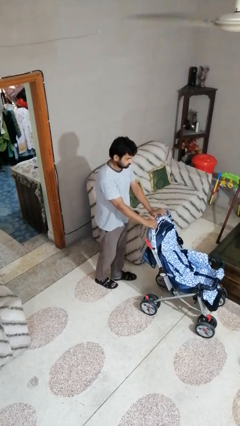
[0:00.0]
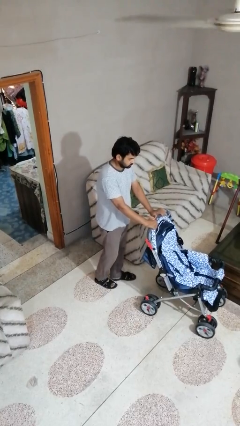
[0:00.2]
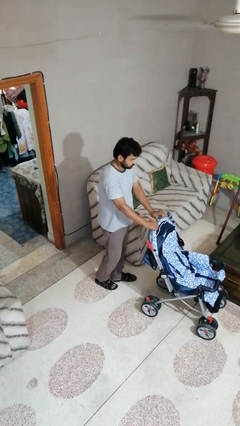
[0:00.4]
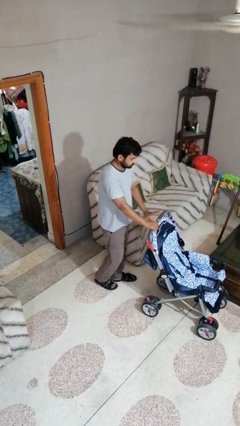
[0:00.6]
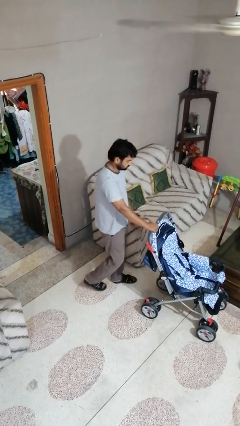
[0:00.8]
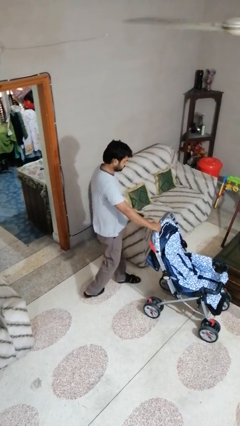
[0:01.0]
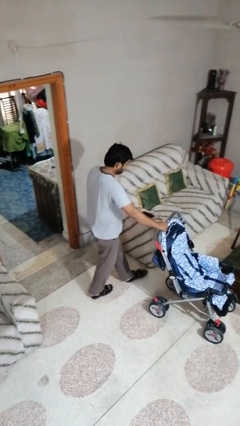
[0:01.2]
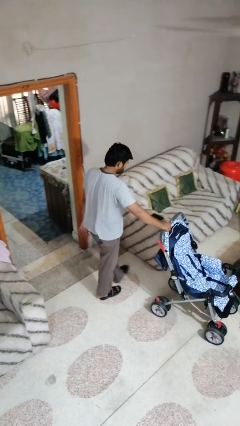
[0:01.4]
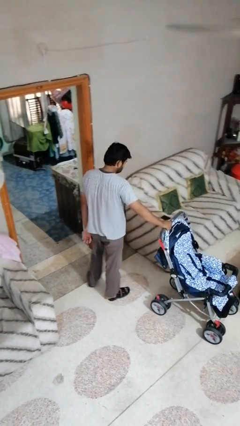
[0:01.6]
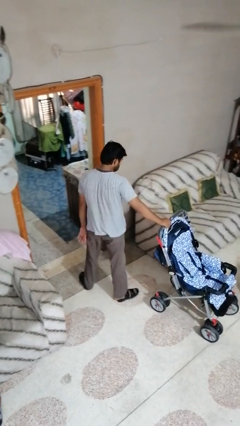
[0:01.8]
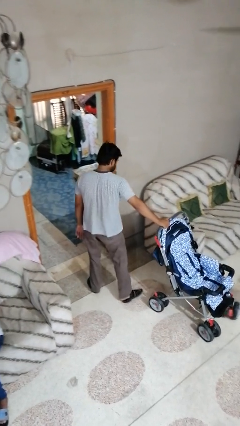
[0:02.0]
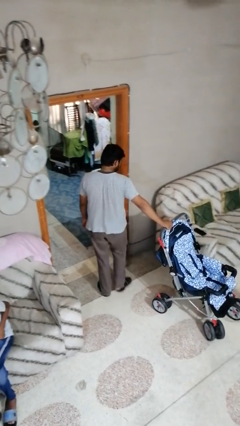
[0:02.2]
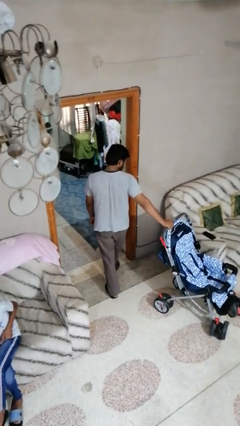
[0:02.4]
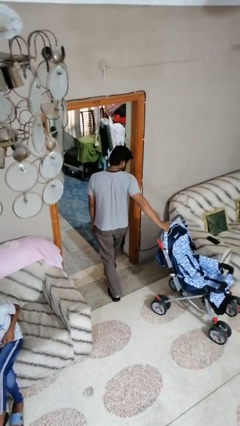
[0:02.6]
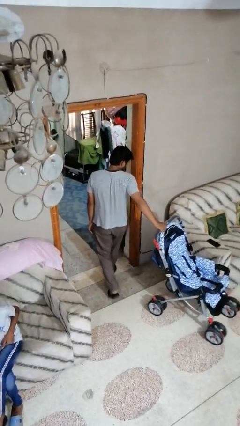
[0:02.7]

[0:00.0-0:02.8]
person pulls wheeled cart

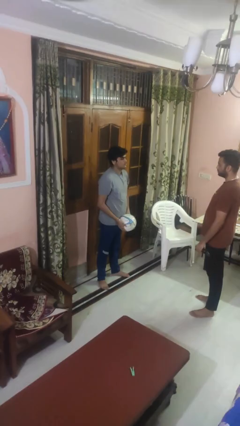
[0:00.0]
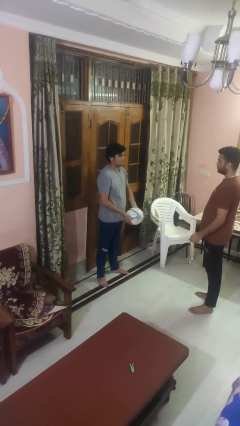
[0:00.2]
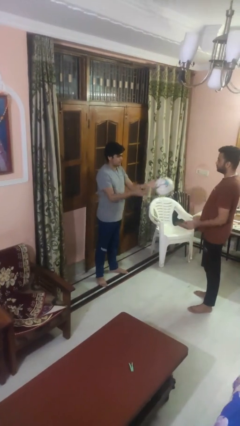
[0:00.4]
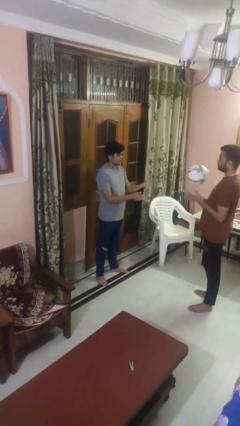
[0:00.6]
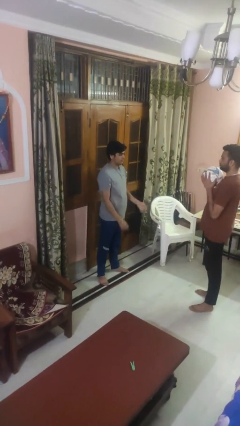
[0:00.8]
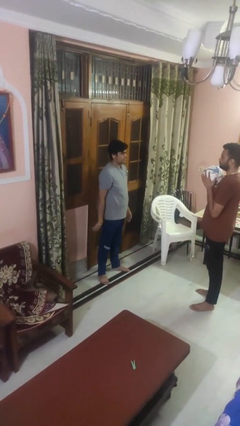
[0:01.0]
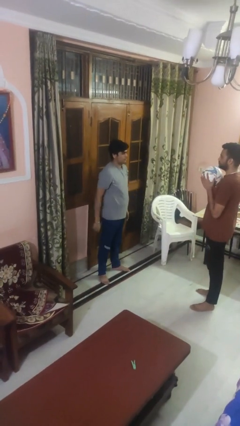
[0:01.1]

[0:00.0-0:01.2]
person throws object to person

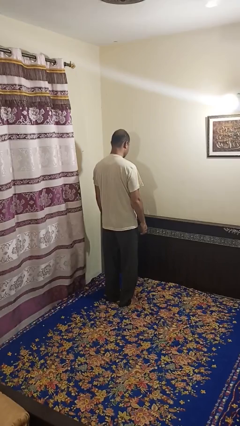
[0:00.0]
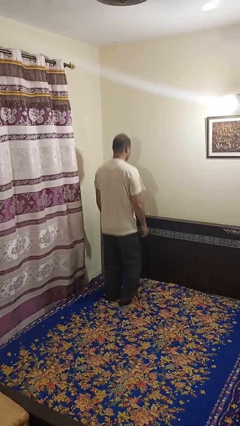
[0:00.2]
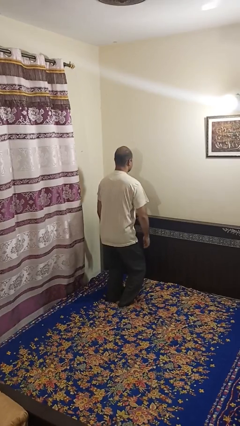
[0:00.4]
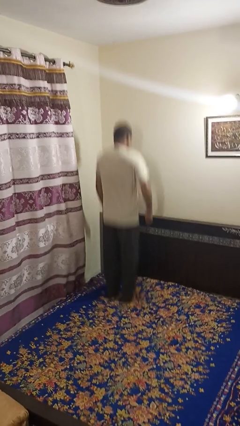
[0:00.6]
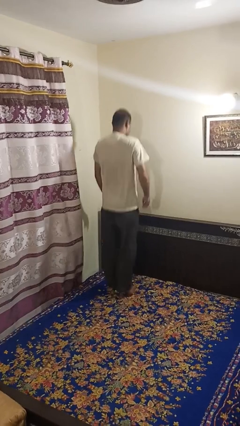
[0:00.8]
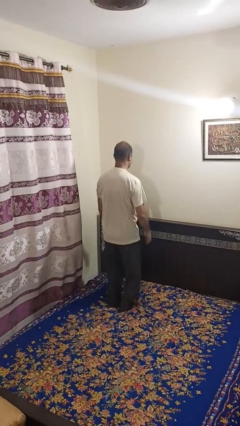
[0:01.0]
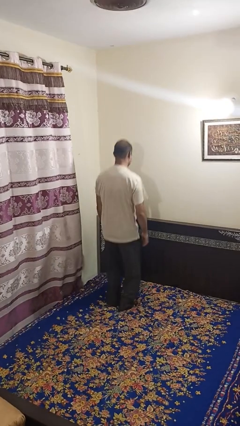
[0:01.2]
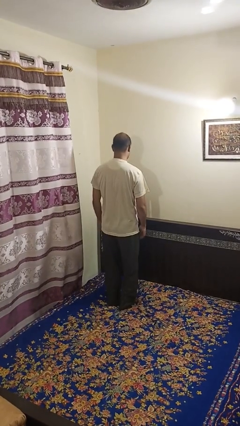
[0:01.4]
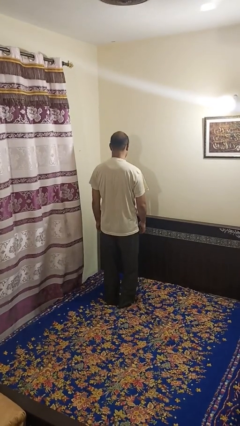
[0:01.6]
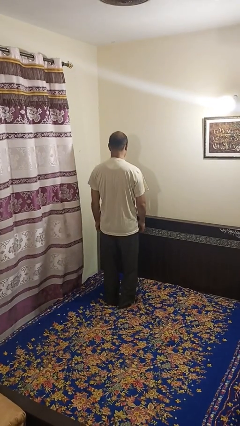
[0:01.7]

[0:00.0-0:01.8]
person jumps on bed

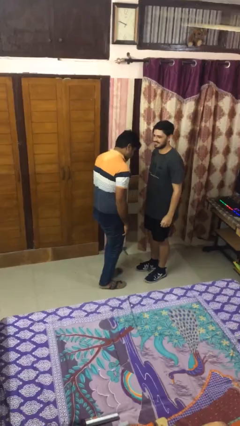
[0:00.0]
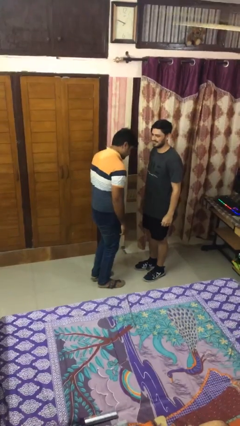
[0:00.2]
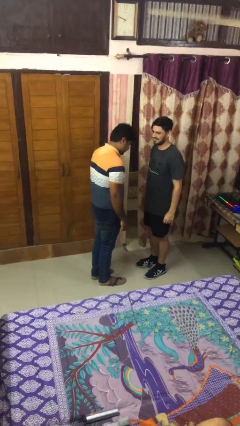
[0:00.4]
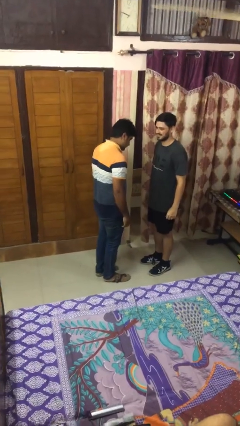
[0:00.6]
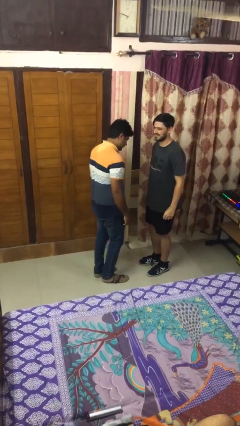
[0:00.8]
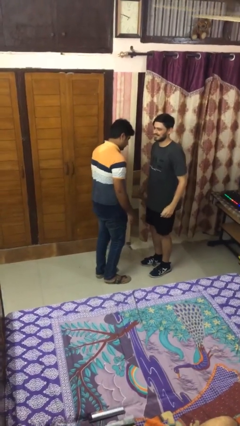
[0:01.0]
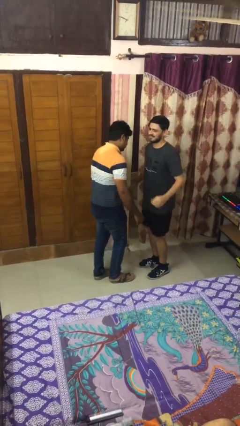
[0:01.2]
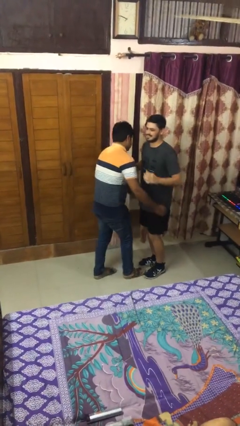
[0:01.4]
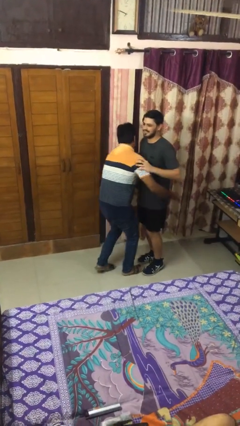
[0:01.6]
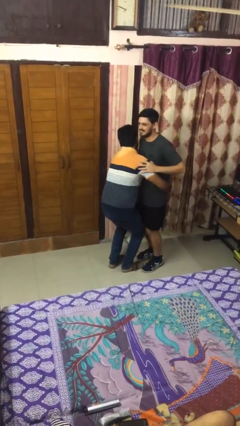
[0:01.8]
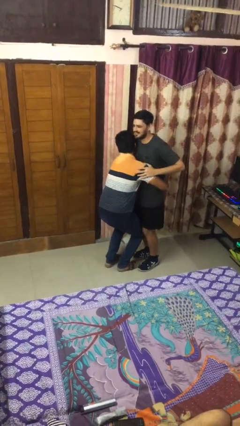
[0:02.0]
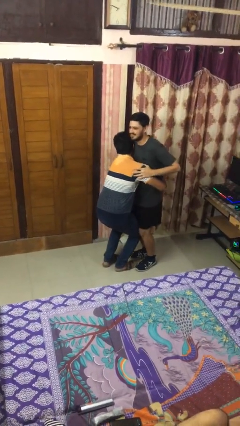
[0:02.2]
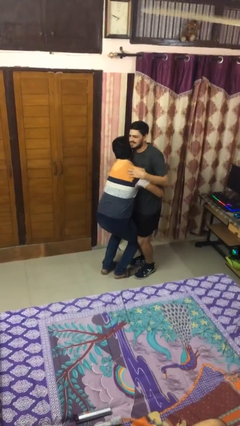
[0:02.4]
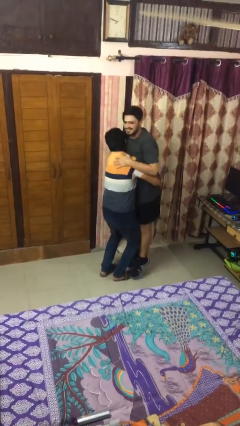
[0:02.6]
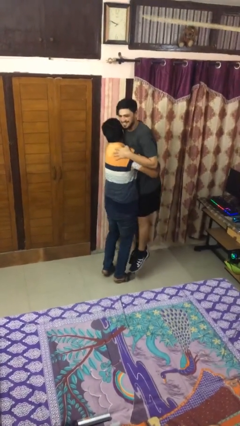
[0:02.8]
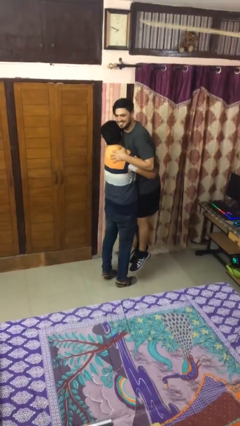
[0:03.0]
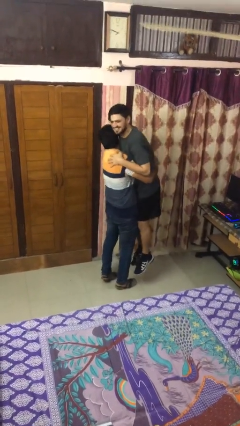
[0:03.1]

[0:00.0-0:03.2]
person picks up person

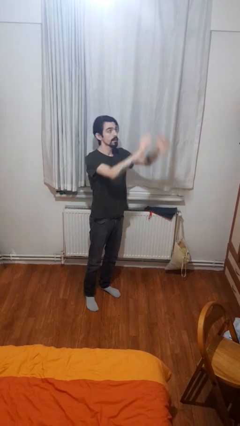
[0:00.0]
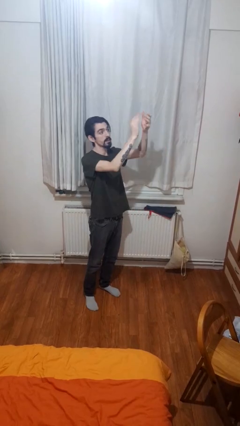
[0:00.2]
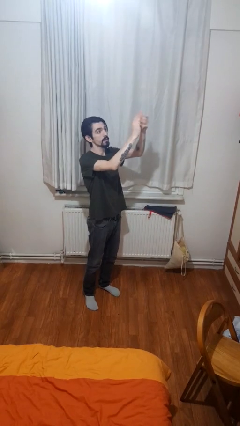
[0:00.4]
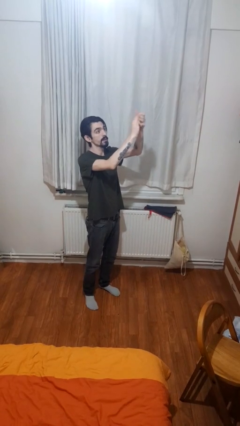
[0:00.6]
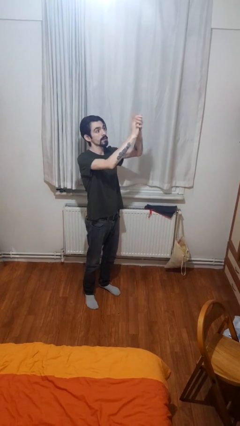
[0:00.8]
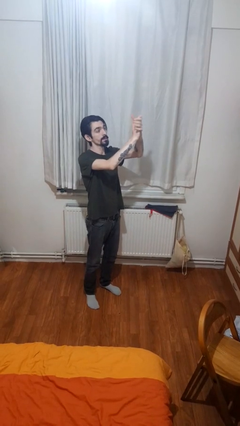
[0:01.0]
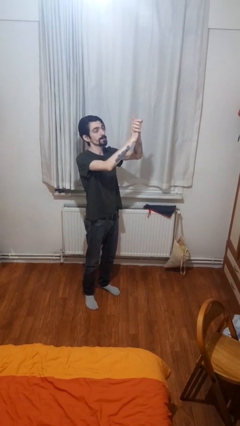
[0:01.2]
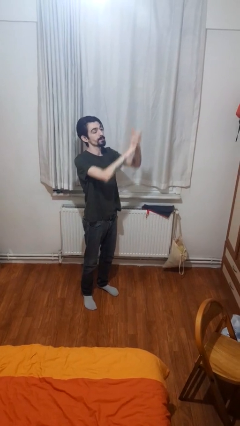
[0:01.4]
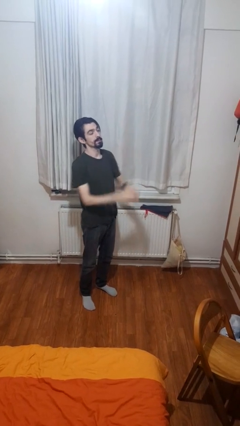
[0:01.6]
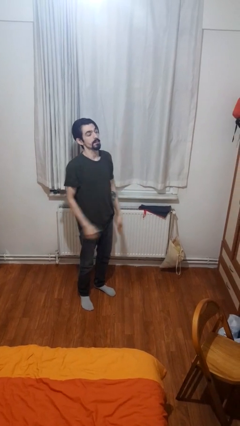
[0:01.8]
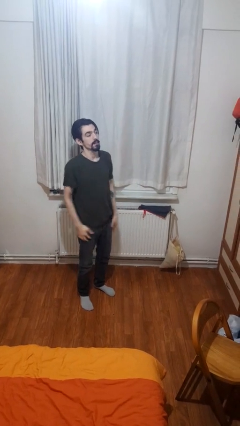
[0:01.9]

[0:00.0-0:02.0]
person claps hands

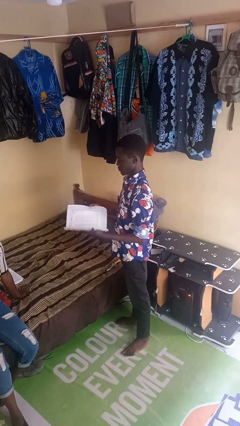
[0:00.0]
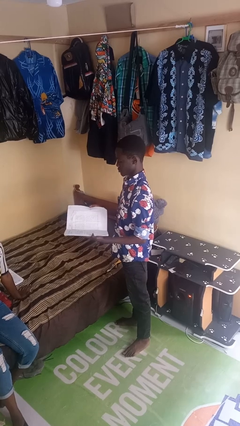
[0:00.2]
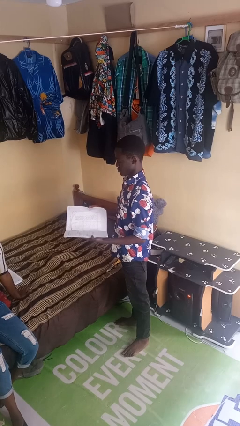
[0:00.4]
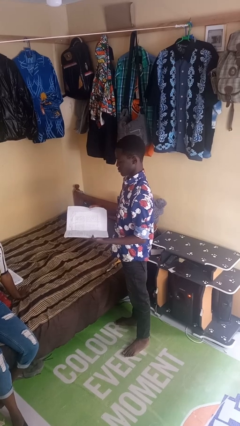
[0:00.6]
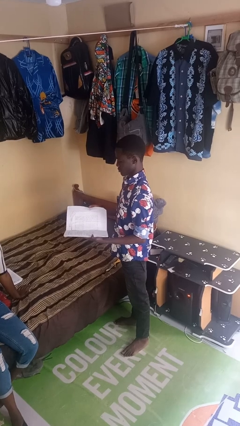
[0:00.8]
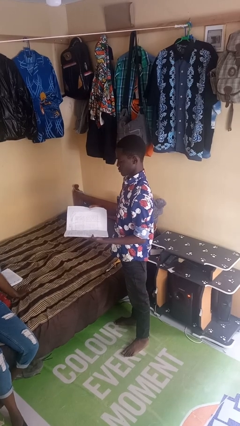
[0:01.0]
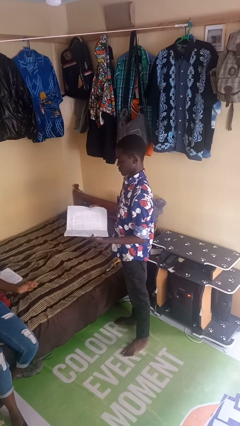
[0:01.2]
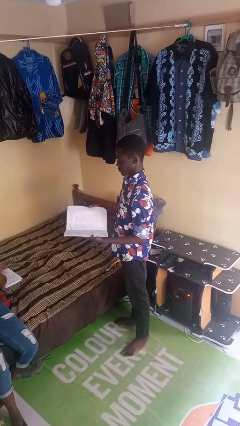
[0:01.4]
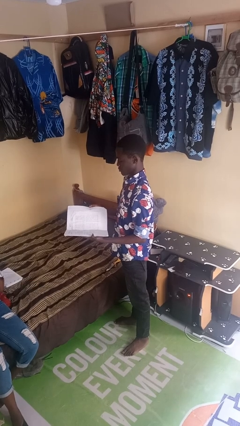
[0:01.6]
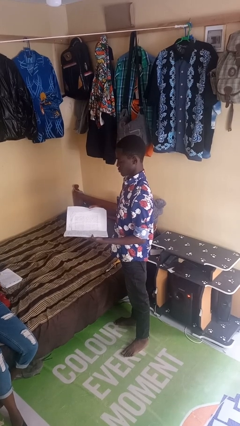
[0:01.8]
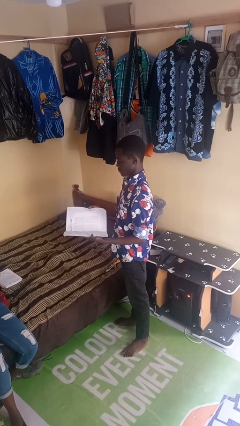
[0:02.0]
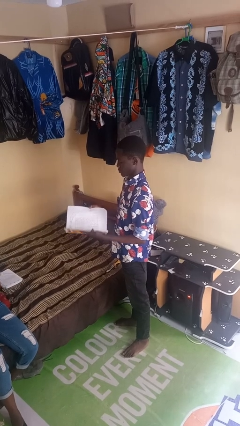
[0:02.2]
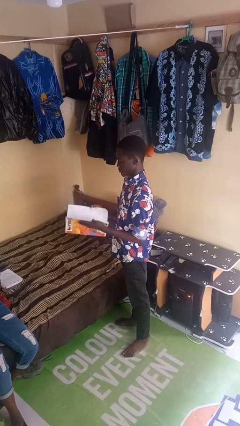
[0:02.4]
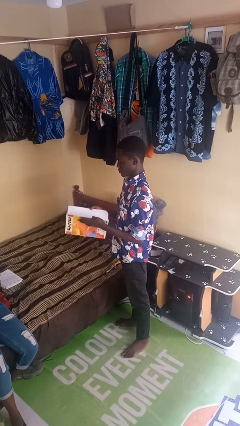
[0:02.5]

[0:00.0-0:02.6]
person reads book

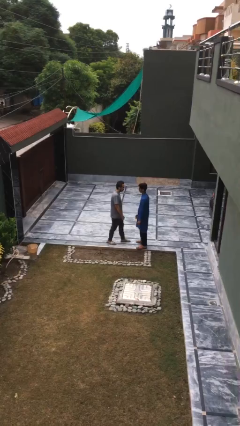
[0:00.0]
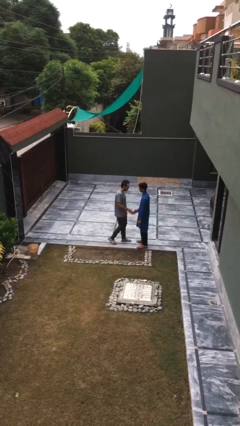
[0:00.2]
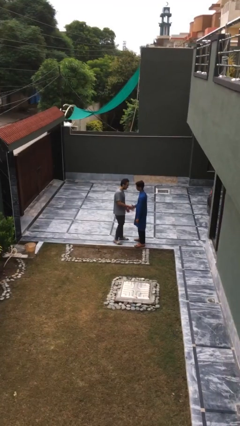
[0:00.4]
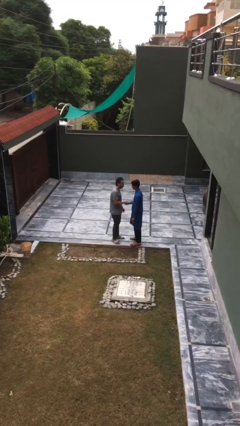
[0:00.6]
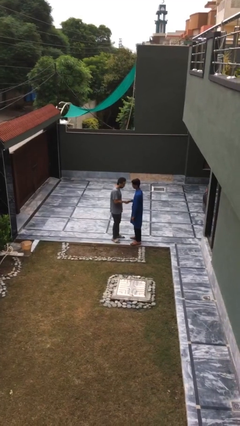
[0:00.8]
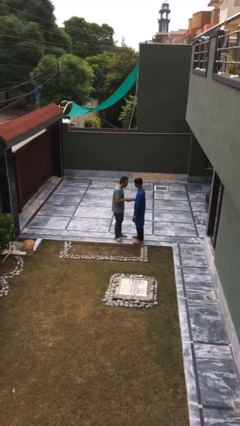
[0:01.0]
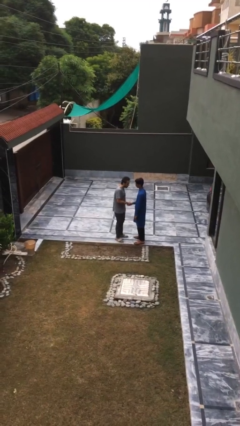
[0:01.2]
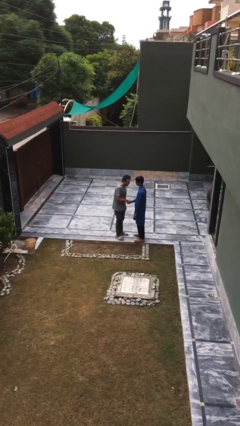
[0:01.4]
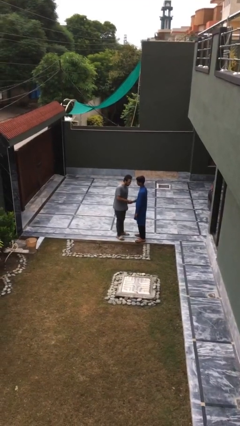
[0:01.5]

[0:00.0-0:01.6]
person shakes hand

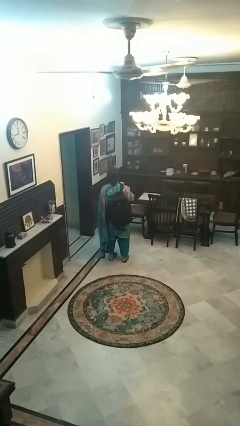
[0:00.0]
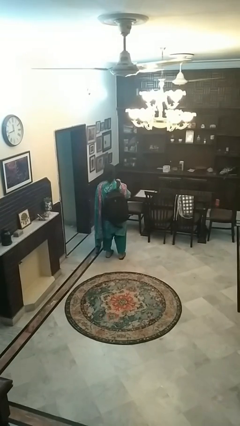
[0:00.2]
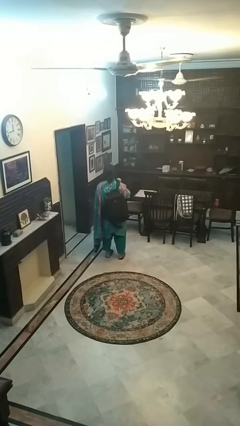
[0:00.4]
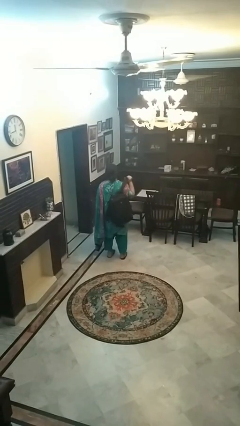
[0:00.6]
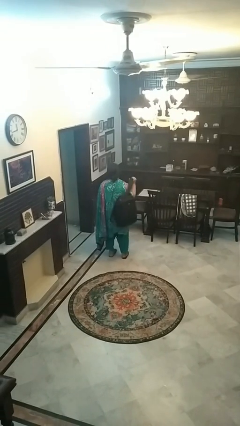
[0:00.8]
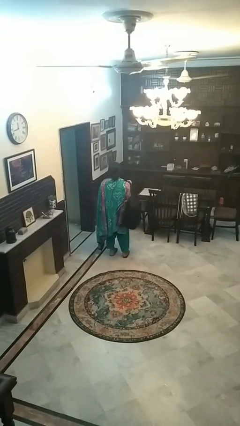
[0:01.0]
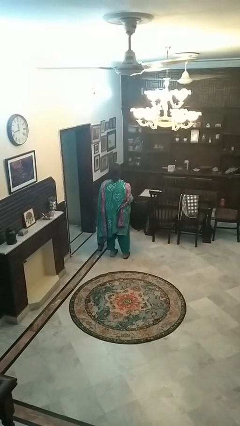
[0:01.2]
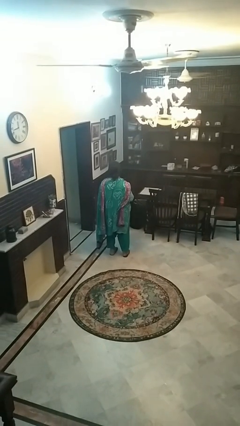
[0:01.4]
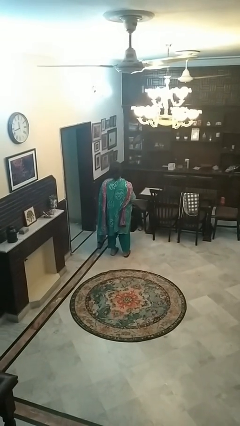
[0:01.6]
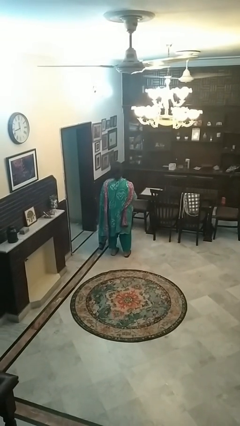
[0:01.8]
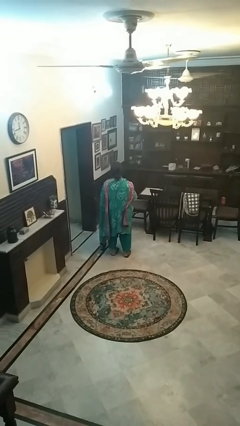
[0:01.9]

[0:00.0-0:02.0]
person takes off backpack
